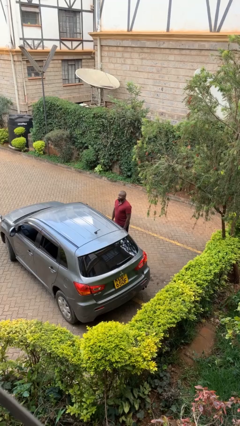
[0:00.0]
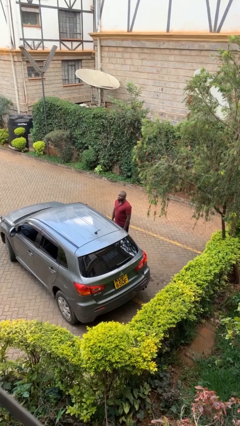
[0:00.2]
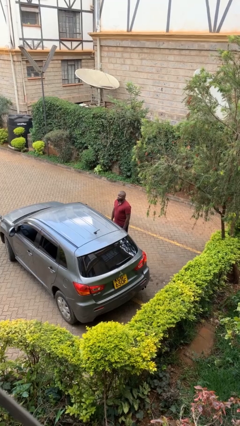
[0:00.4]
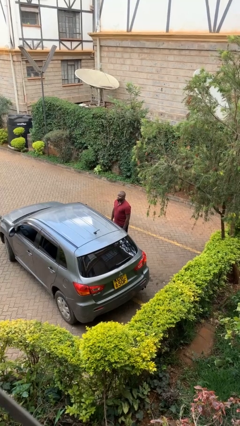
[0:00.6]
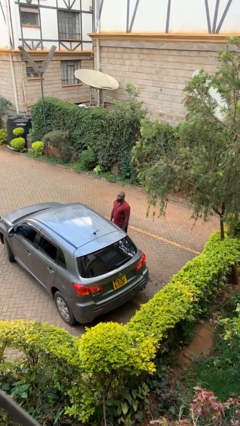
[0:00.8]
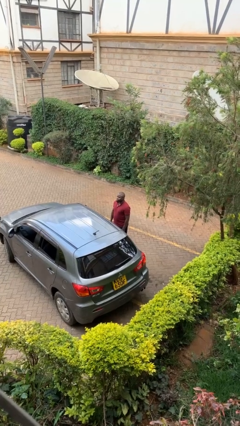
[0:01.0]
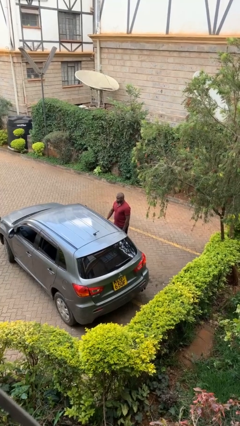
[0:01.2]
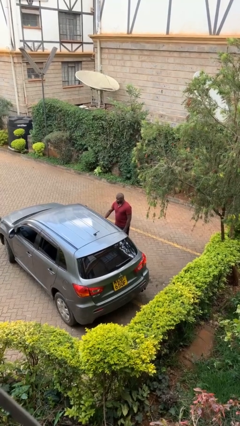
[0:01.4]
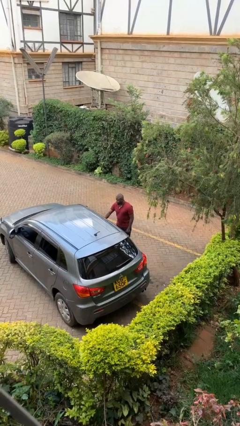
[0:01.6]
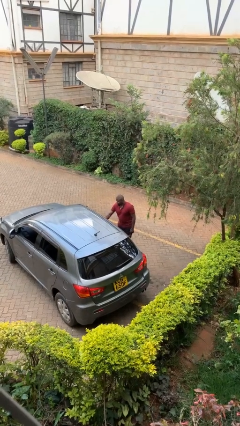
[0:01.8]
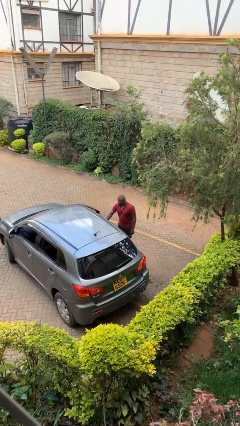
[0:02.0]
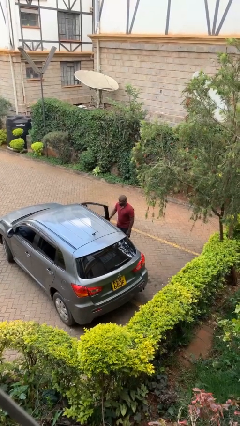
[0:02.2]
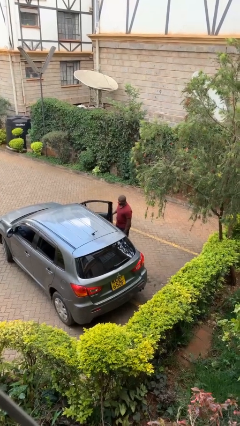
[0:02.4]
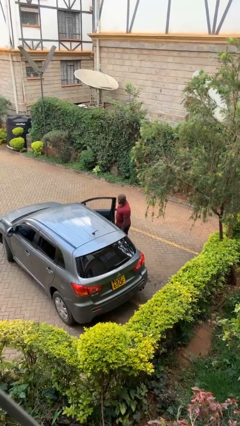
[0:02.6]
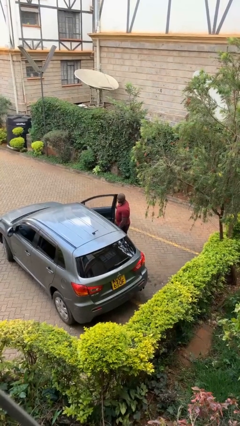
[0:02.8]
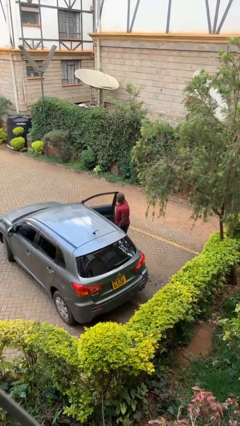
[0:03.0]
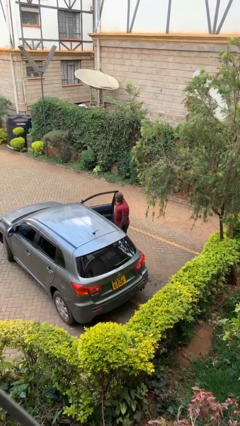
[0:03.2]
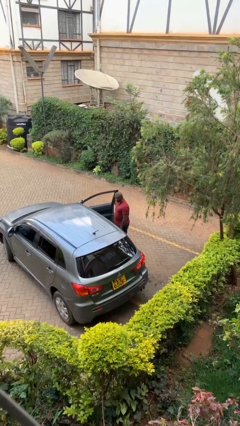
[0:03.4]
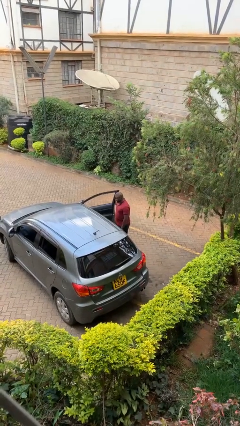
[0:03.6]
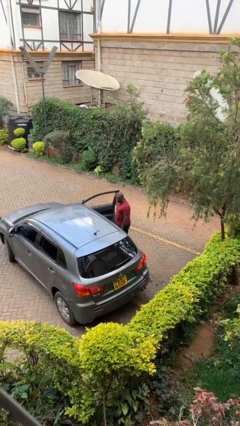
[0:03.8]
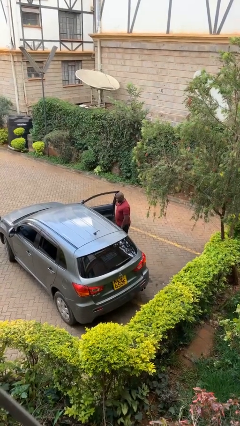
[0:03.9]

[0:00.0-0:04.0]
person opens car door

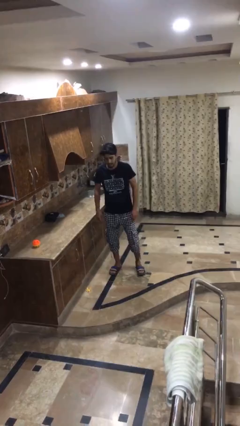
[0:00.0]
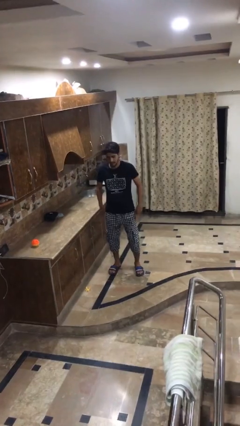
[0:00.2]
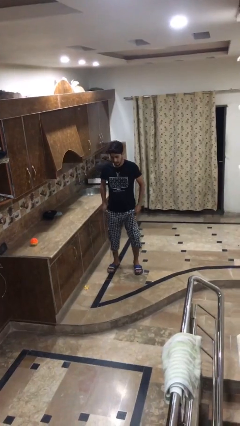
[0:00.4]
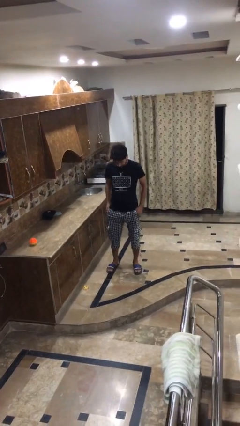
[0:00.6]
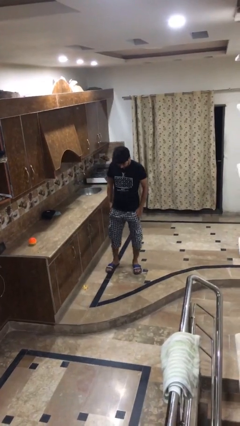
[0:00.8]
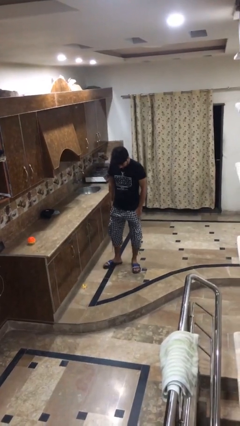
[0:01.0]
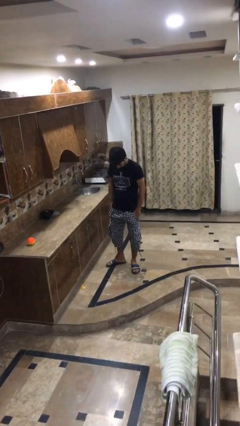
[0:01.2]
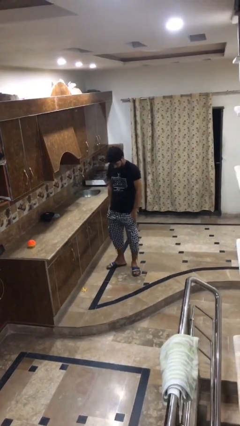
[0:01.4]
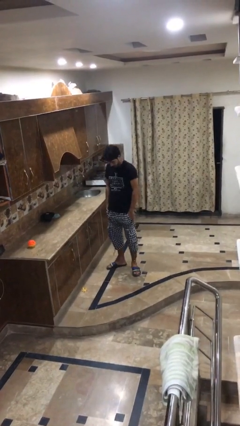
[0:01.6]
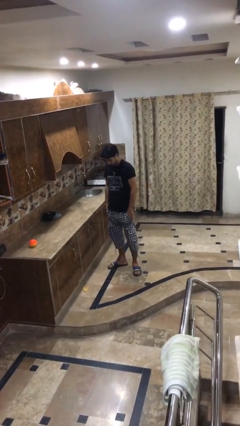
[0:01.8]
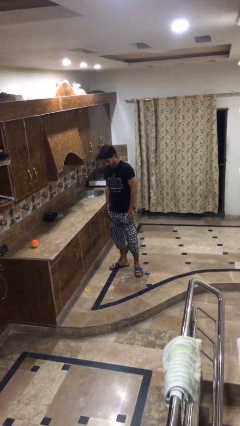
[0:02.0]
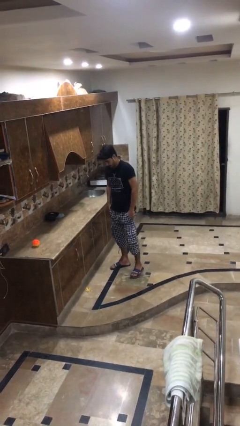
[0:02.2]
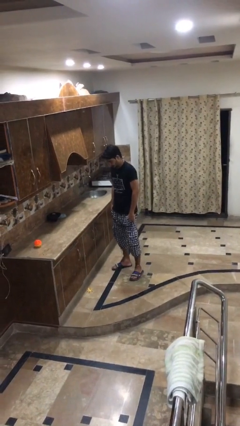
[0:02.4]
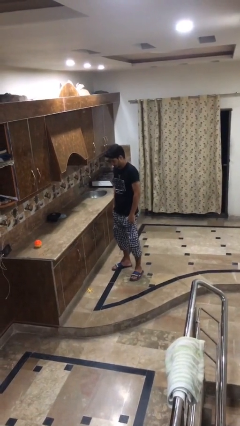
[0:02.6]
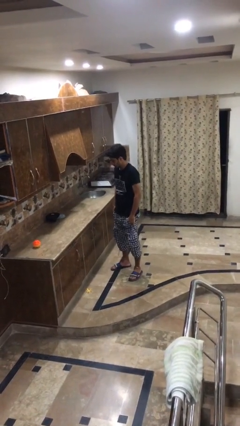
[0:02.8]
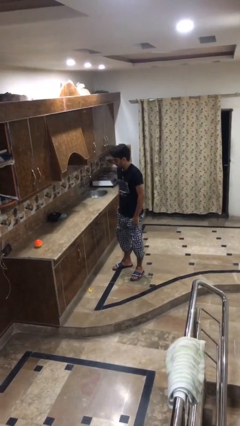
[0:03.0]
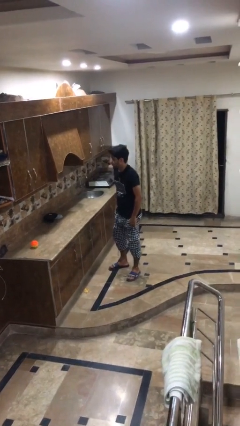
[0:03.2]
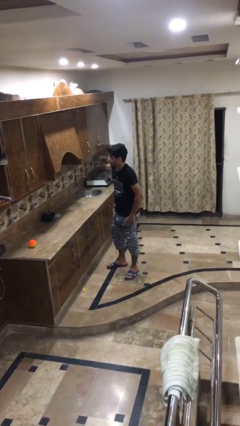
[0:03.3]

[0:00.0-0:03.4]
person puts hands in back pockets

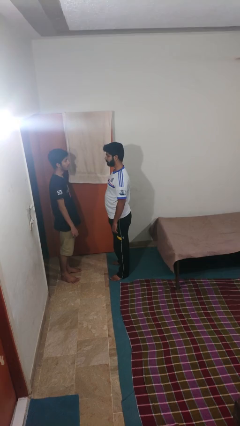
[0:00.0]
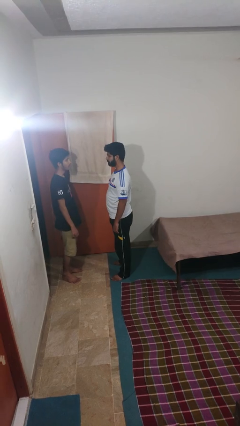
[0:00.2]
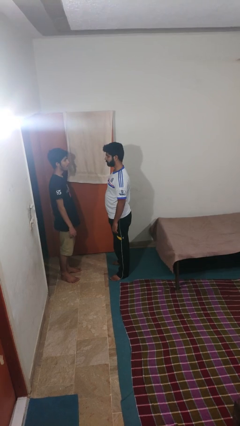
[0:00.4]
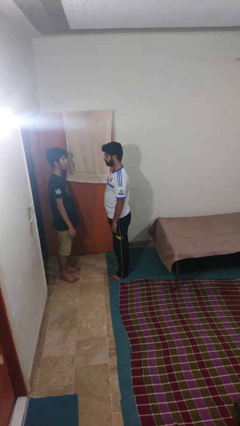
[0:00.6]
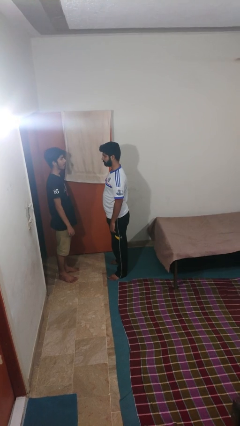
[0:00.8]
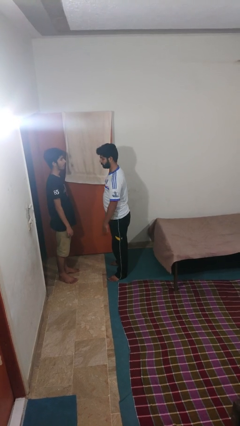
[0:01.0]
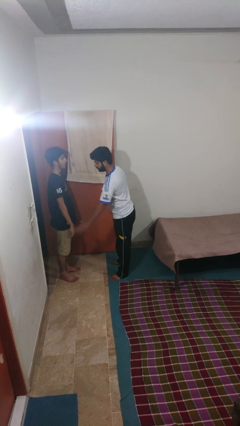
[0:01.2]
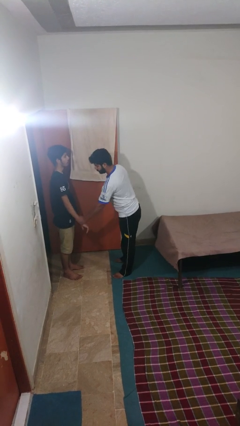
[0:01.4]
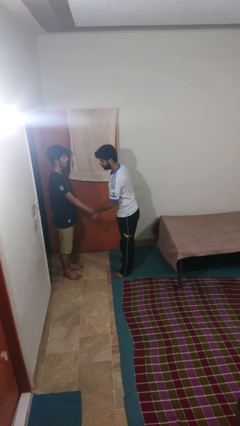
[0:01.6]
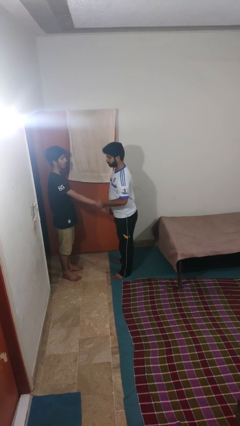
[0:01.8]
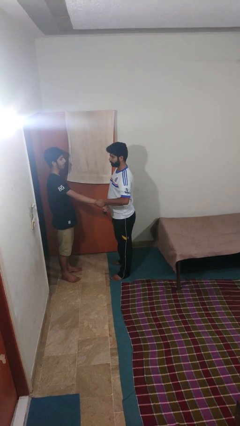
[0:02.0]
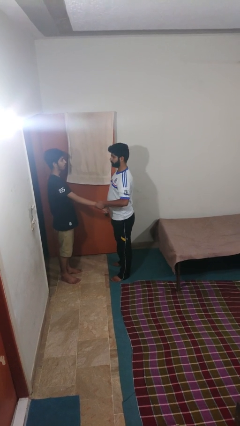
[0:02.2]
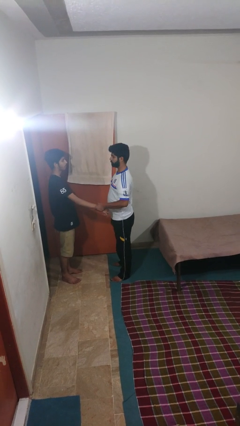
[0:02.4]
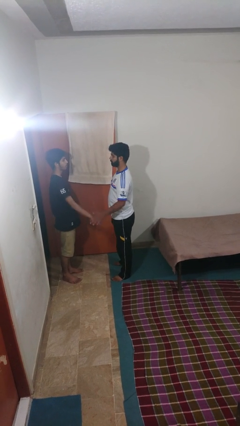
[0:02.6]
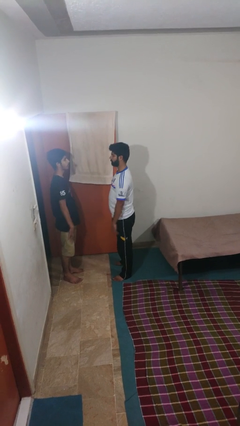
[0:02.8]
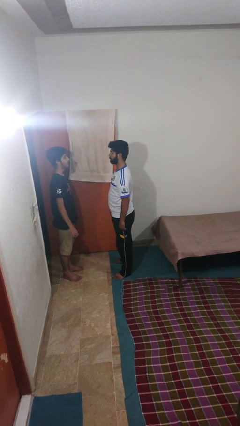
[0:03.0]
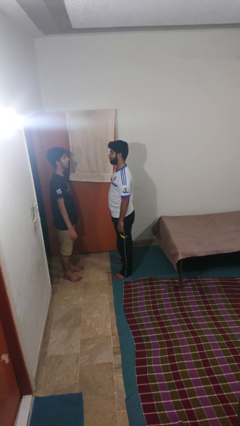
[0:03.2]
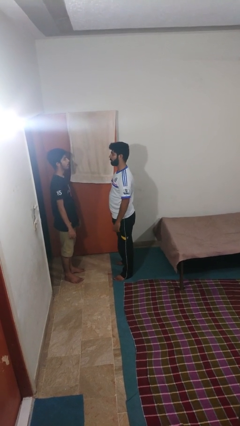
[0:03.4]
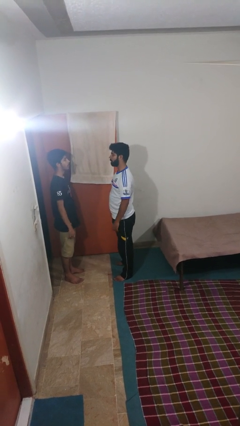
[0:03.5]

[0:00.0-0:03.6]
person grabs person by forearm

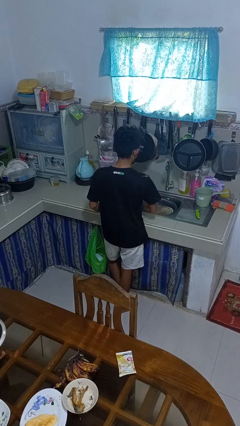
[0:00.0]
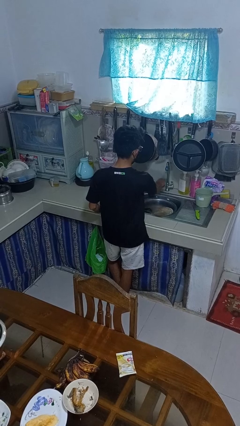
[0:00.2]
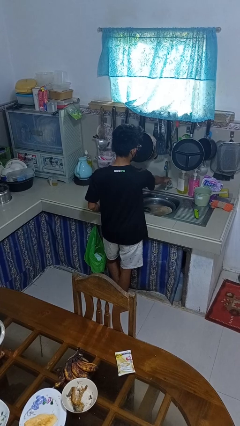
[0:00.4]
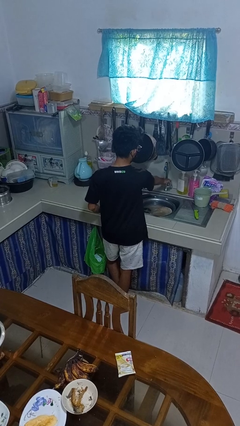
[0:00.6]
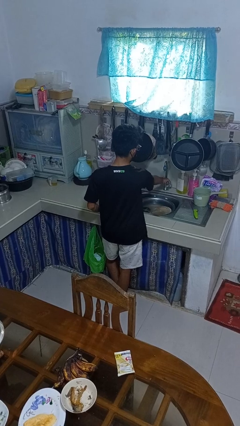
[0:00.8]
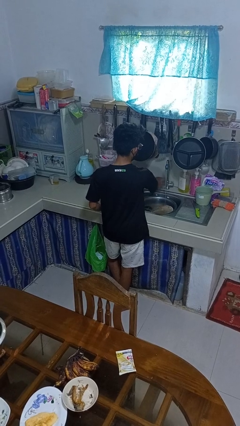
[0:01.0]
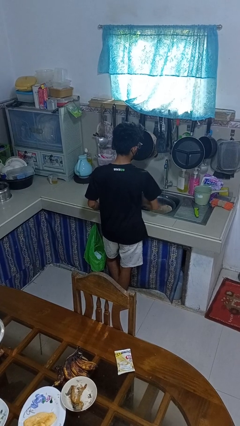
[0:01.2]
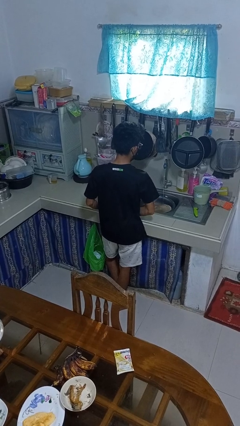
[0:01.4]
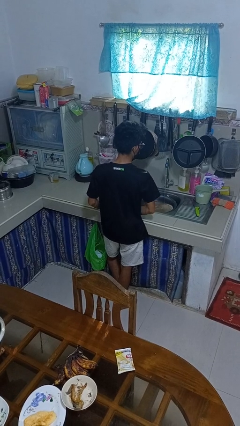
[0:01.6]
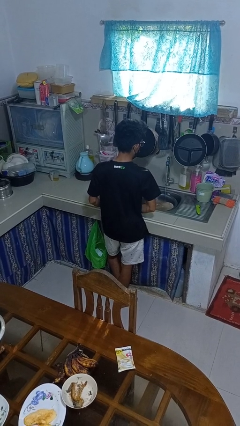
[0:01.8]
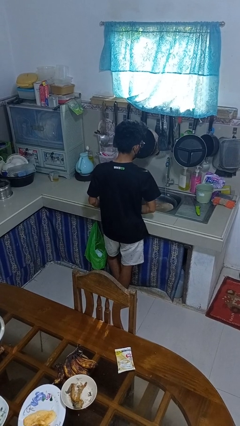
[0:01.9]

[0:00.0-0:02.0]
person turns on faucet

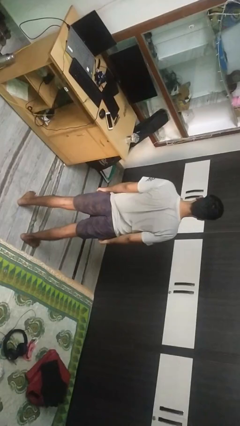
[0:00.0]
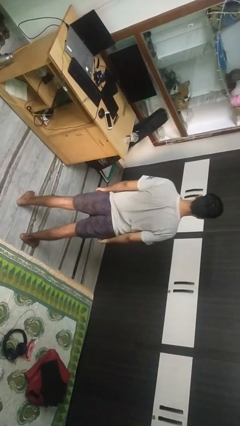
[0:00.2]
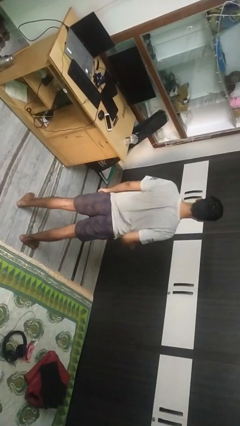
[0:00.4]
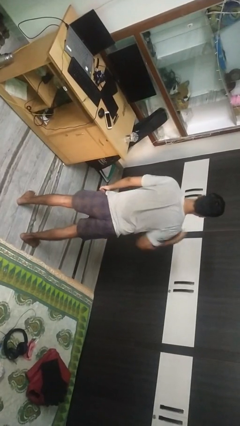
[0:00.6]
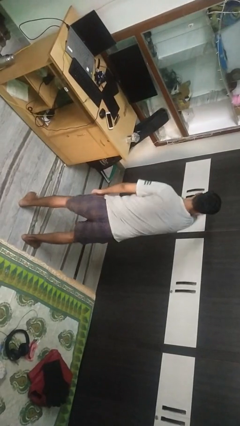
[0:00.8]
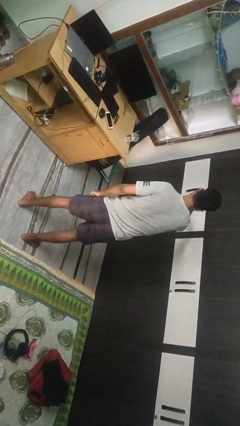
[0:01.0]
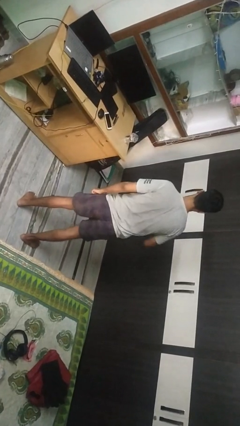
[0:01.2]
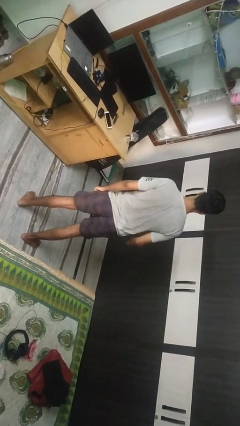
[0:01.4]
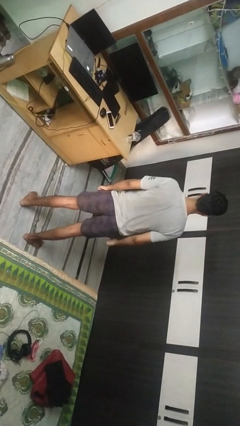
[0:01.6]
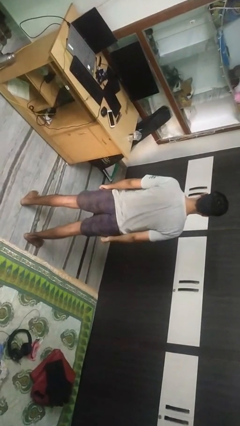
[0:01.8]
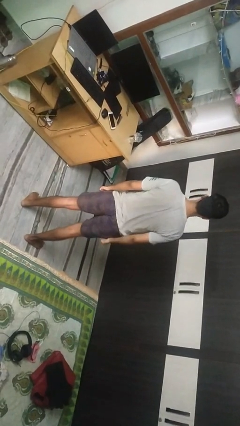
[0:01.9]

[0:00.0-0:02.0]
person punches

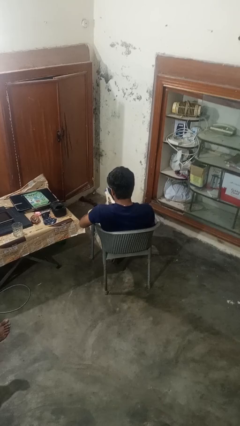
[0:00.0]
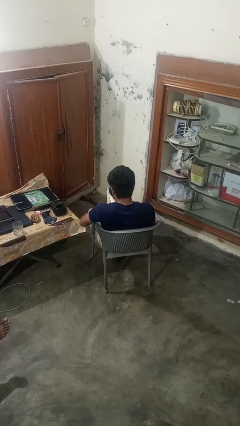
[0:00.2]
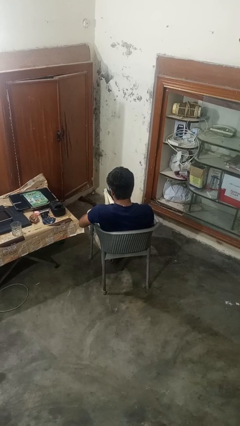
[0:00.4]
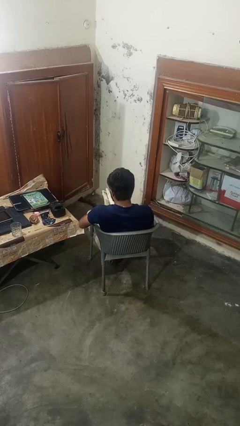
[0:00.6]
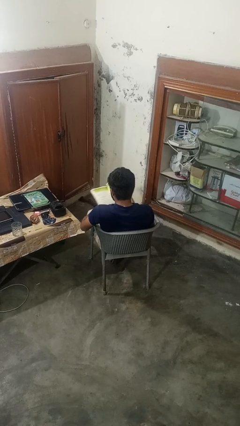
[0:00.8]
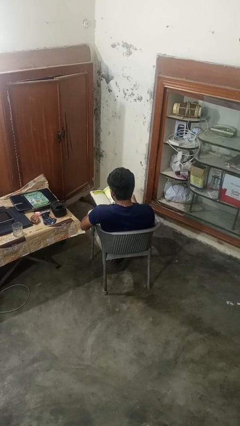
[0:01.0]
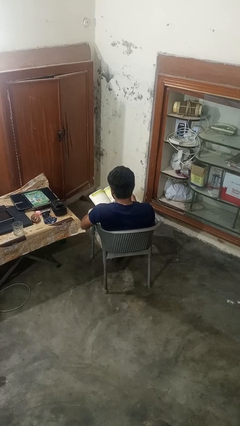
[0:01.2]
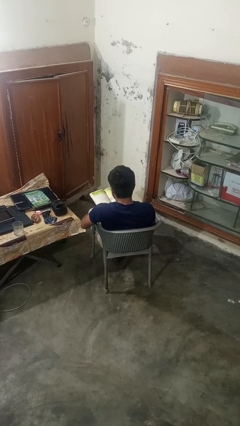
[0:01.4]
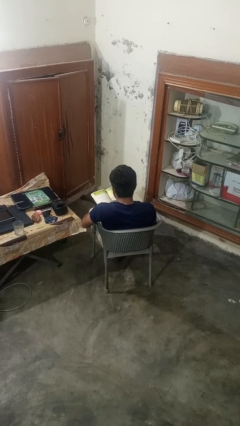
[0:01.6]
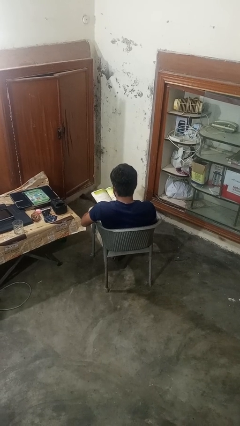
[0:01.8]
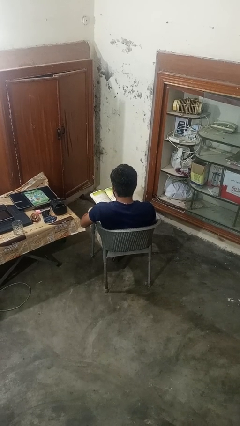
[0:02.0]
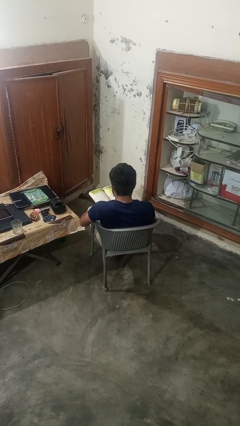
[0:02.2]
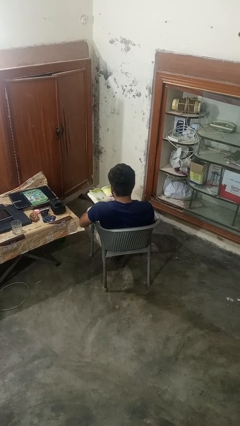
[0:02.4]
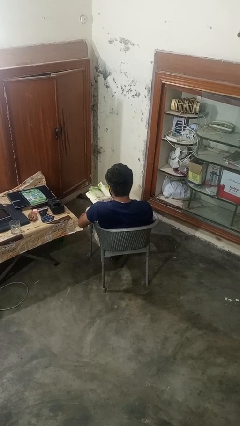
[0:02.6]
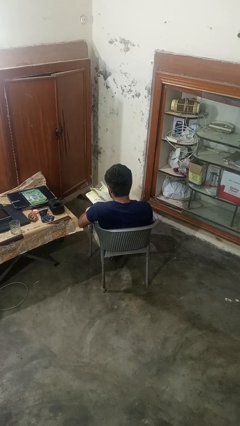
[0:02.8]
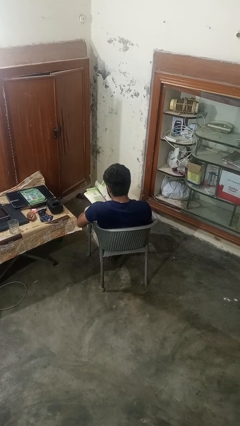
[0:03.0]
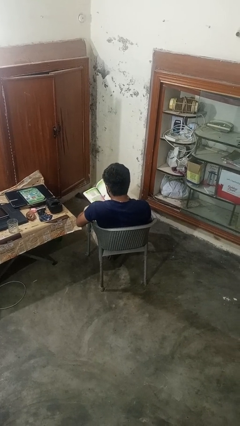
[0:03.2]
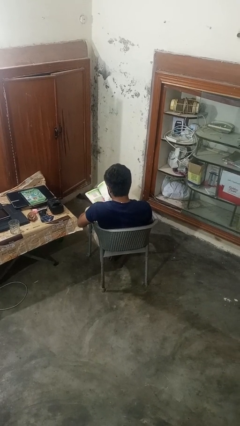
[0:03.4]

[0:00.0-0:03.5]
person reads book
